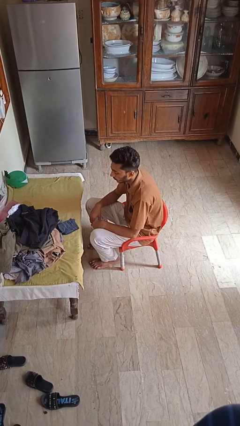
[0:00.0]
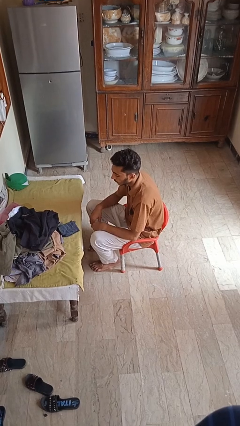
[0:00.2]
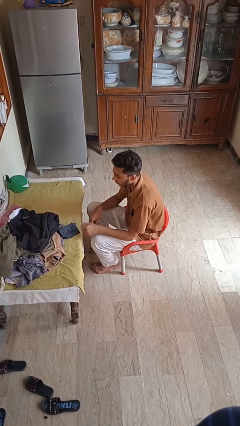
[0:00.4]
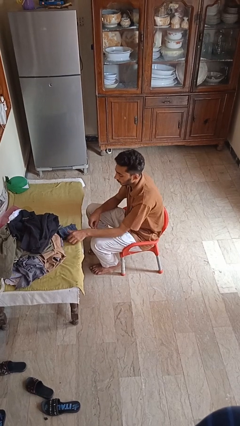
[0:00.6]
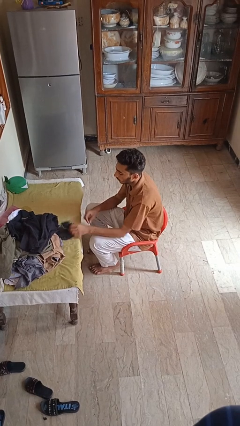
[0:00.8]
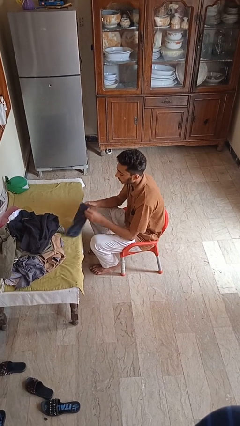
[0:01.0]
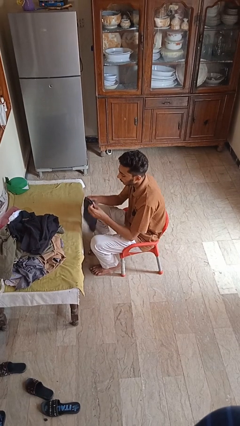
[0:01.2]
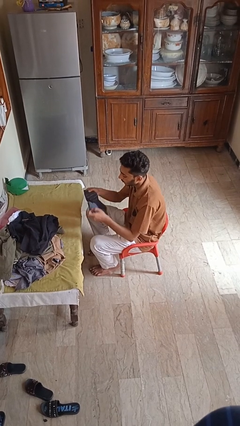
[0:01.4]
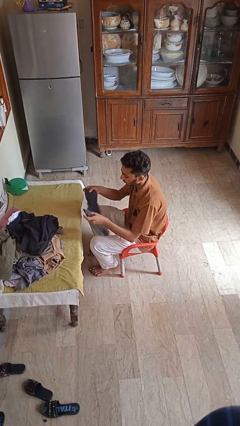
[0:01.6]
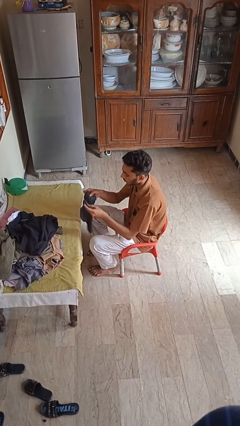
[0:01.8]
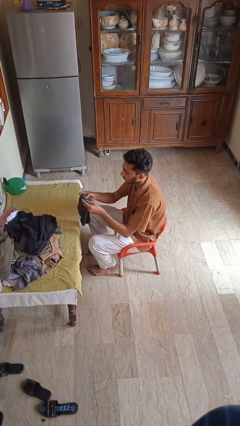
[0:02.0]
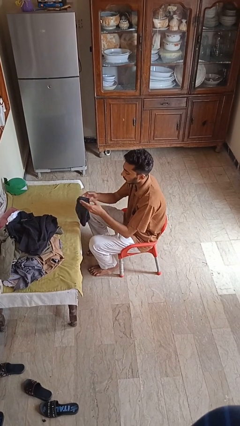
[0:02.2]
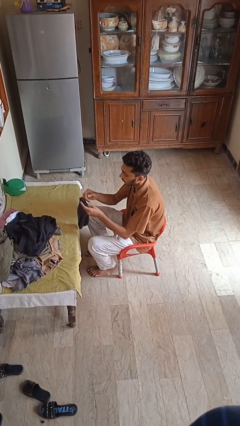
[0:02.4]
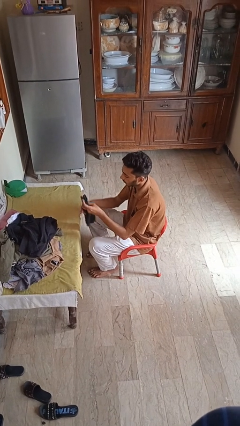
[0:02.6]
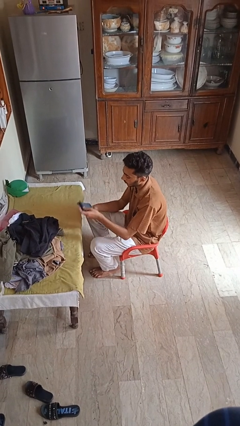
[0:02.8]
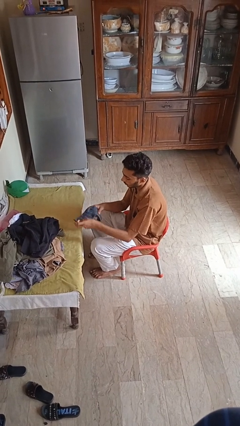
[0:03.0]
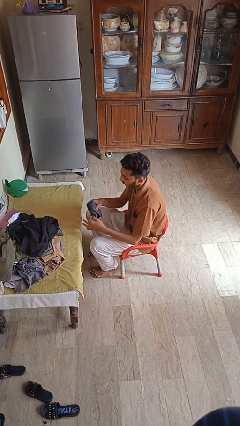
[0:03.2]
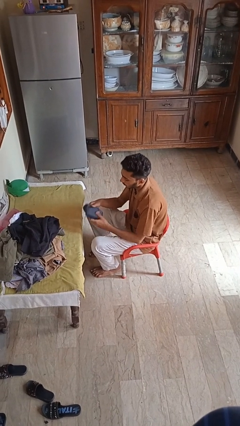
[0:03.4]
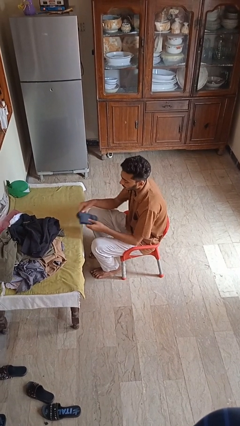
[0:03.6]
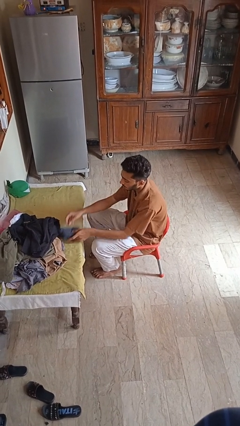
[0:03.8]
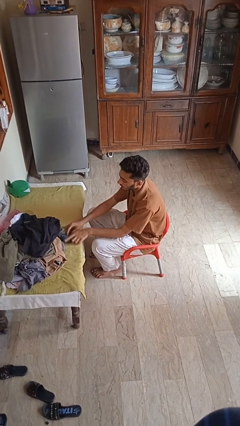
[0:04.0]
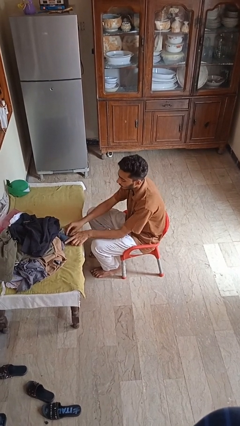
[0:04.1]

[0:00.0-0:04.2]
person folds socks

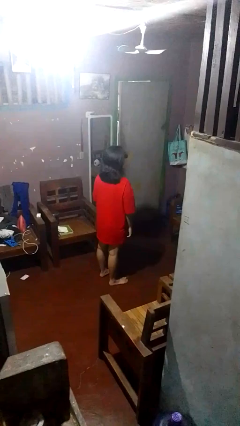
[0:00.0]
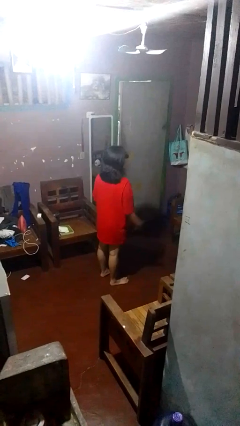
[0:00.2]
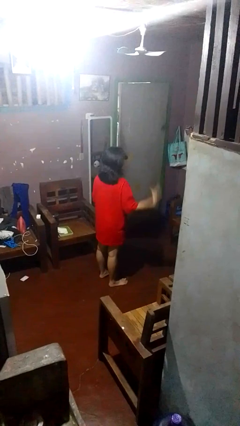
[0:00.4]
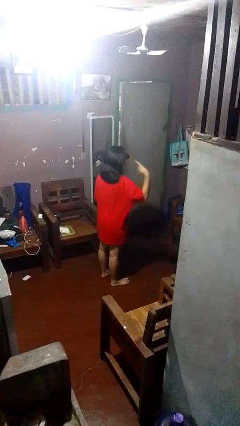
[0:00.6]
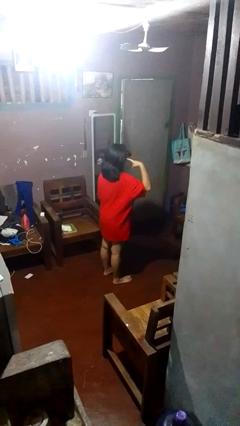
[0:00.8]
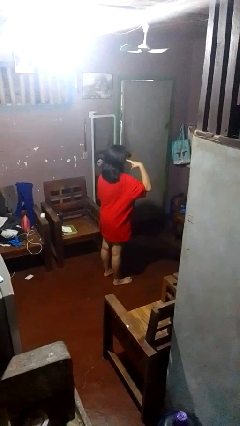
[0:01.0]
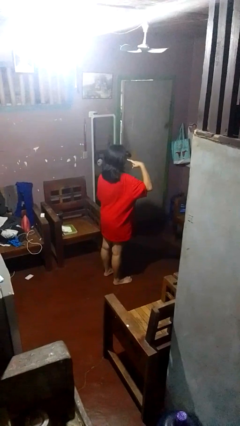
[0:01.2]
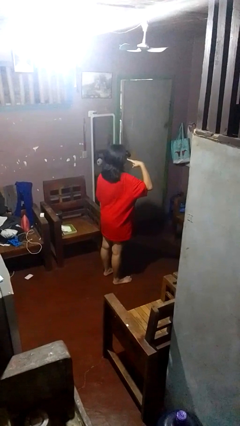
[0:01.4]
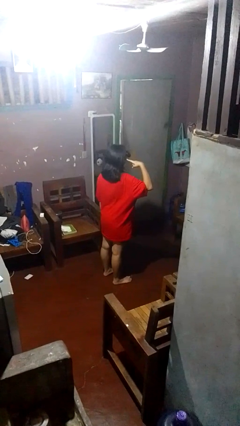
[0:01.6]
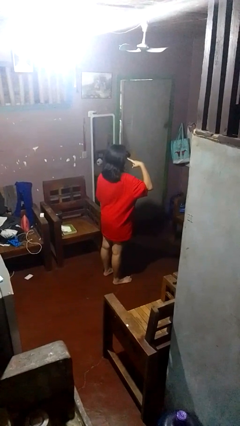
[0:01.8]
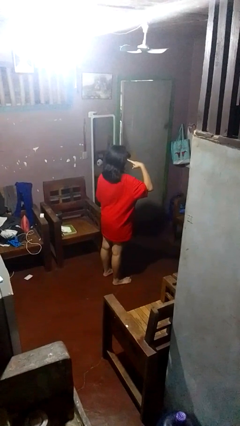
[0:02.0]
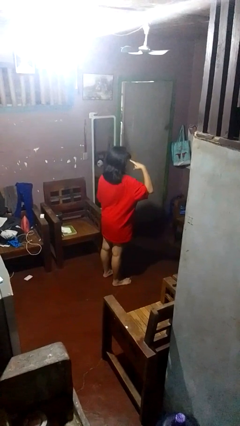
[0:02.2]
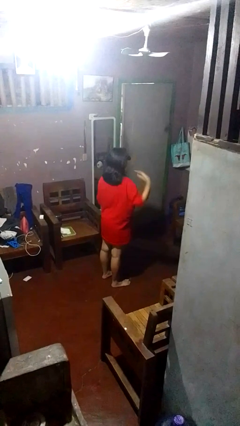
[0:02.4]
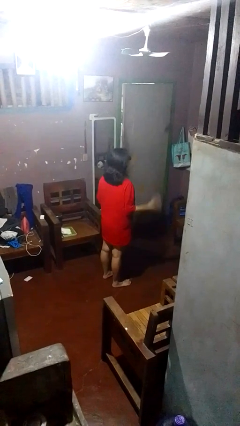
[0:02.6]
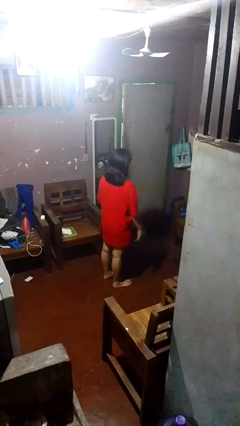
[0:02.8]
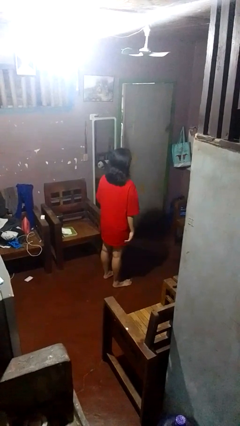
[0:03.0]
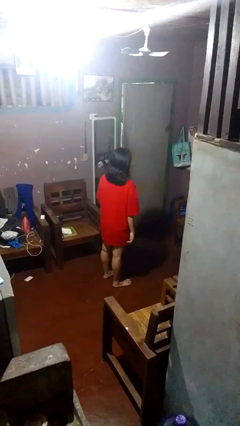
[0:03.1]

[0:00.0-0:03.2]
person gestures listen closely

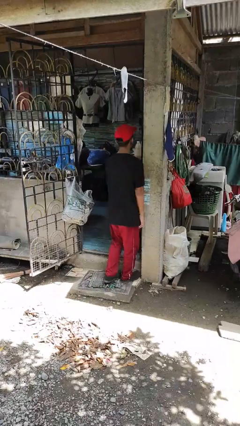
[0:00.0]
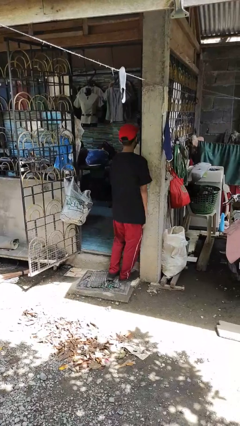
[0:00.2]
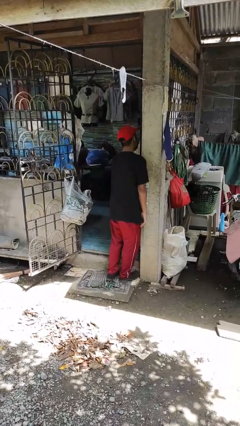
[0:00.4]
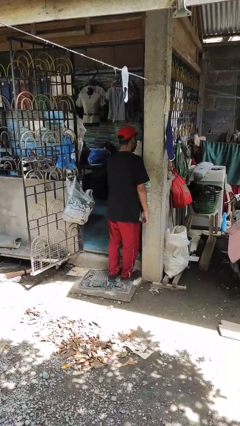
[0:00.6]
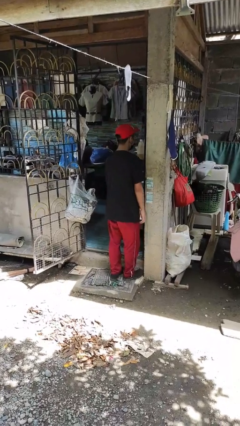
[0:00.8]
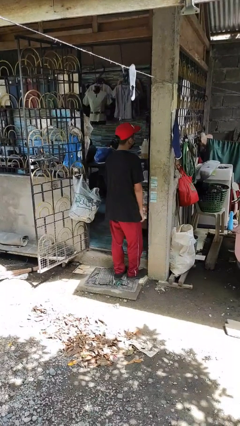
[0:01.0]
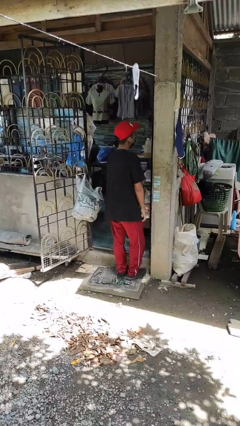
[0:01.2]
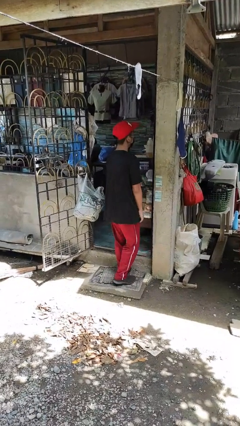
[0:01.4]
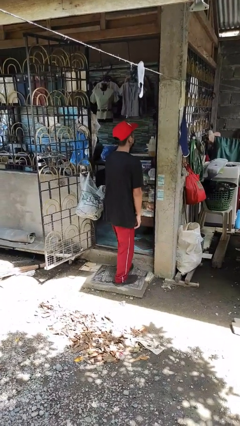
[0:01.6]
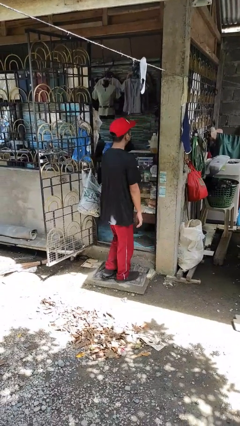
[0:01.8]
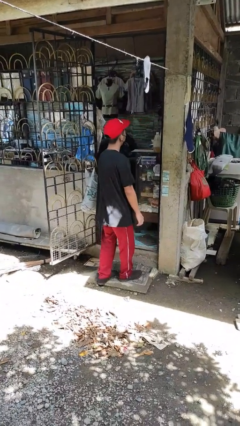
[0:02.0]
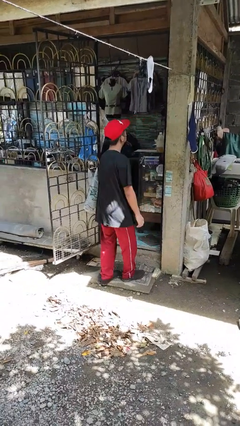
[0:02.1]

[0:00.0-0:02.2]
person bumps into wall

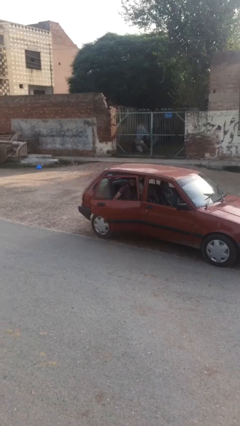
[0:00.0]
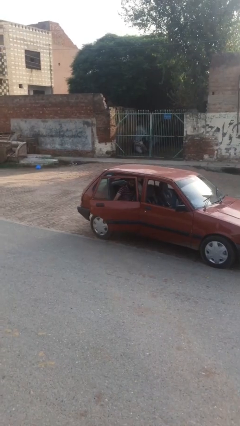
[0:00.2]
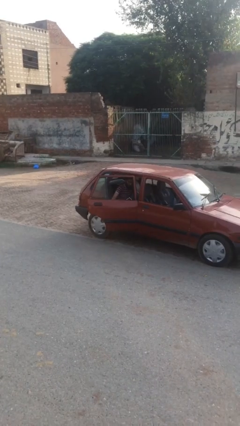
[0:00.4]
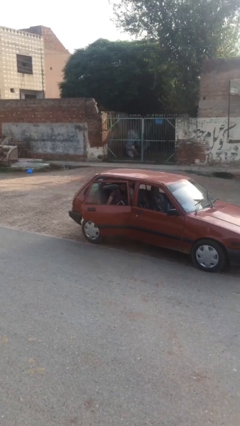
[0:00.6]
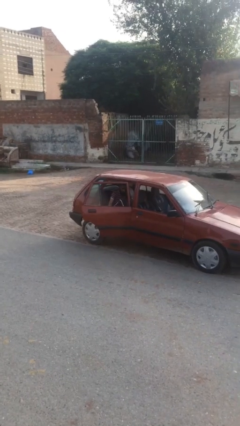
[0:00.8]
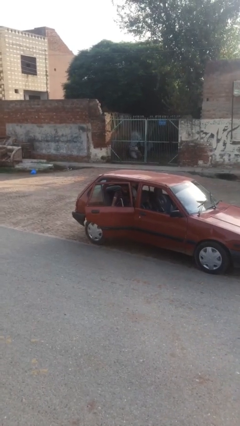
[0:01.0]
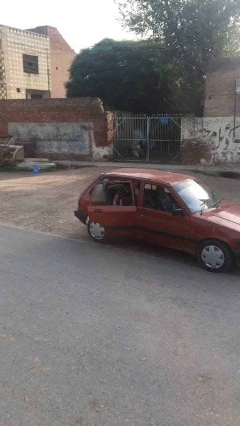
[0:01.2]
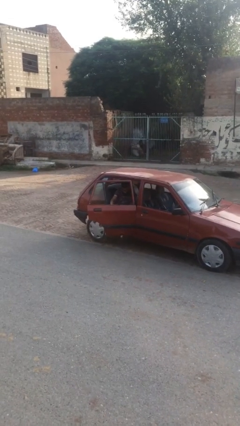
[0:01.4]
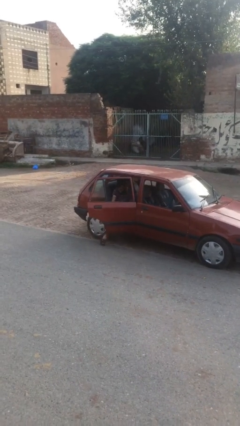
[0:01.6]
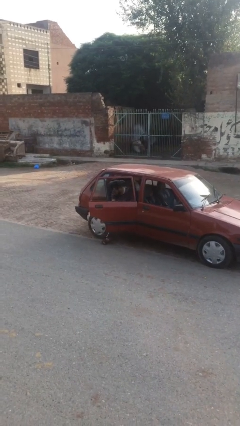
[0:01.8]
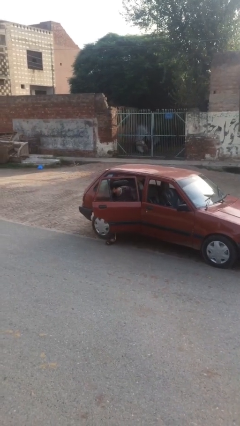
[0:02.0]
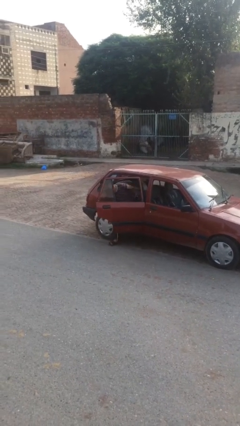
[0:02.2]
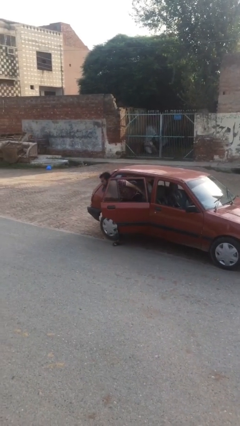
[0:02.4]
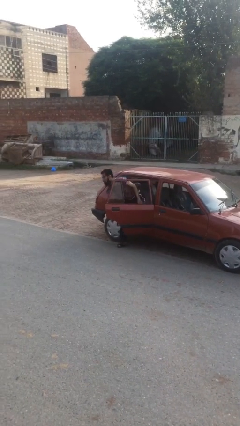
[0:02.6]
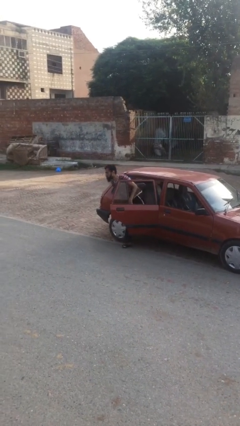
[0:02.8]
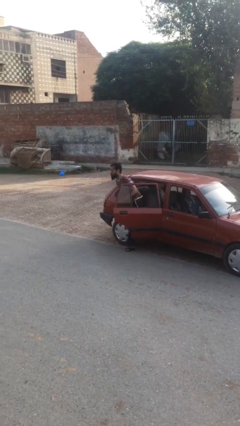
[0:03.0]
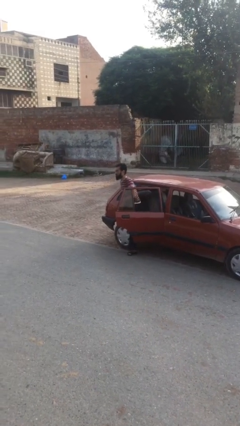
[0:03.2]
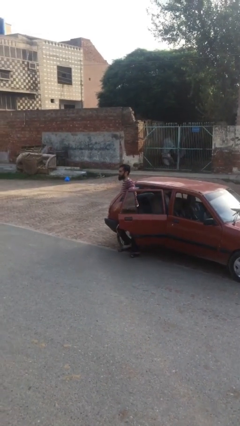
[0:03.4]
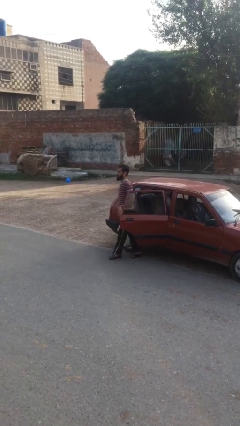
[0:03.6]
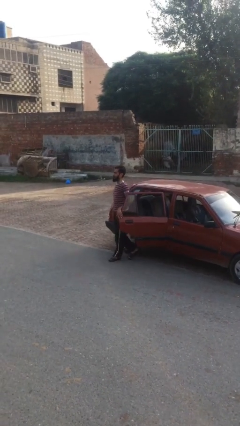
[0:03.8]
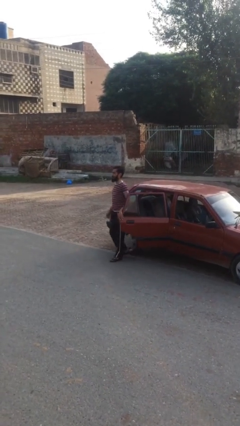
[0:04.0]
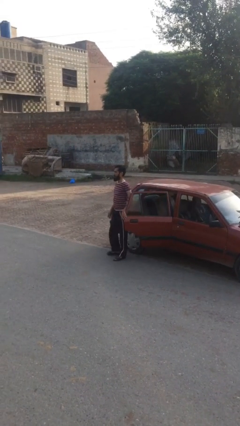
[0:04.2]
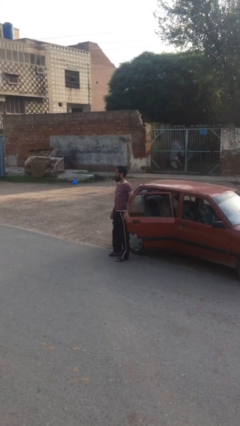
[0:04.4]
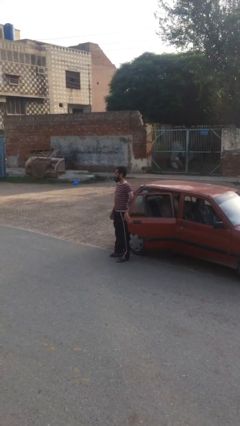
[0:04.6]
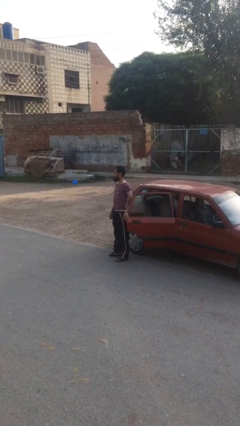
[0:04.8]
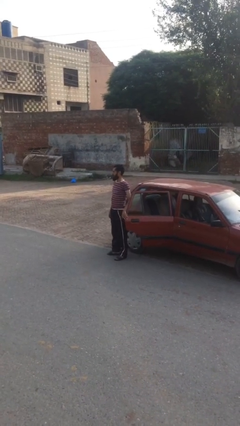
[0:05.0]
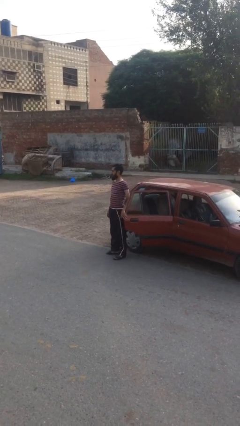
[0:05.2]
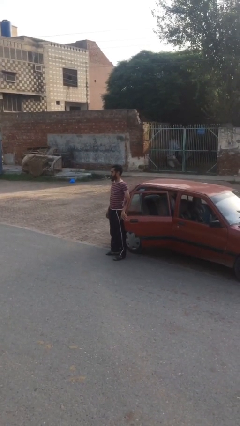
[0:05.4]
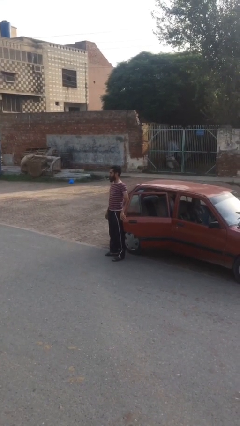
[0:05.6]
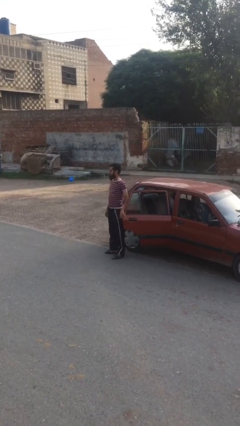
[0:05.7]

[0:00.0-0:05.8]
person exits car

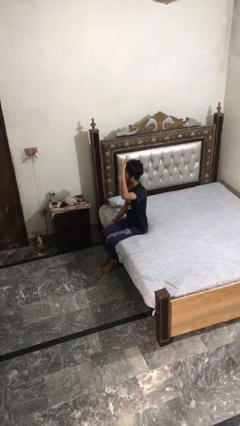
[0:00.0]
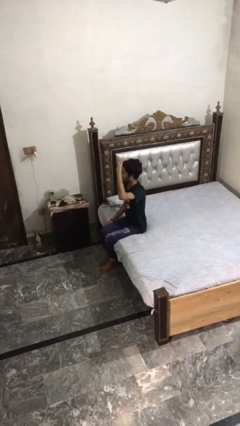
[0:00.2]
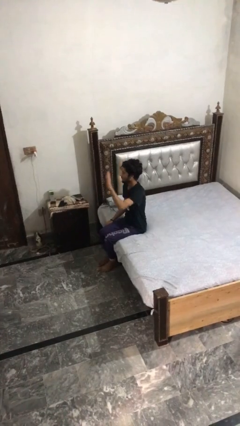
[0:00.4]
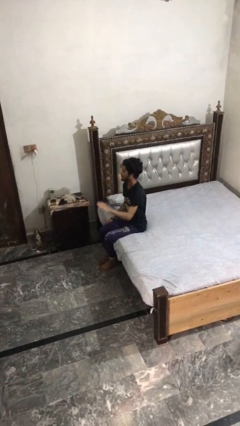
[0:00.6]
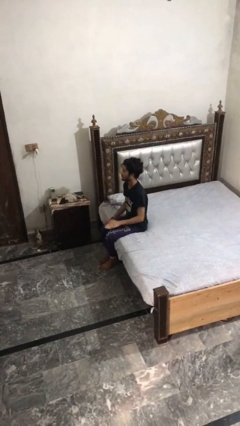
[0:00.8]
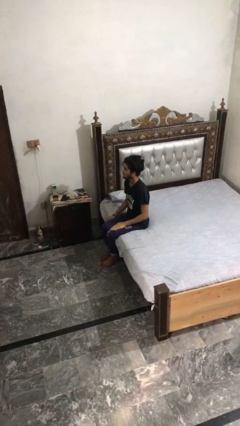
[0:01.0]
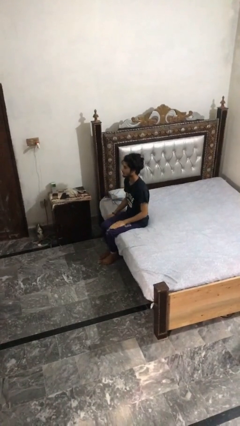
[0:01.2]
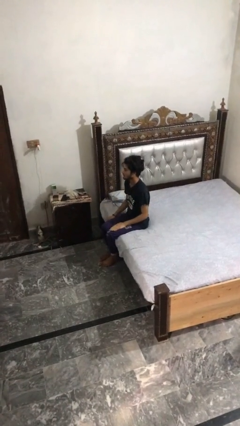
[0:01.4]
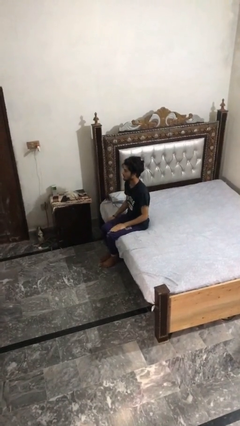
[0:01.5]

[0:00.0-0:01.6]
person gestures lower hand

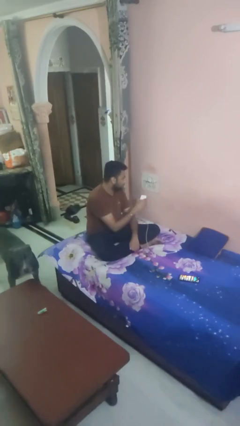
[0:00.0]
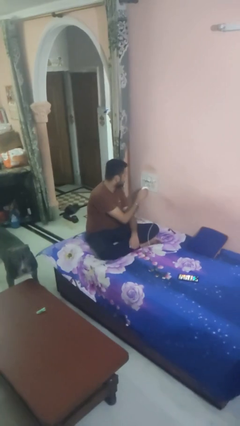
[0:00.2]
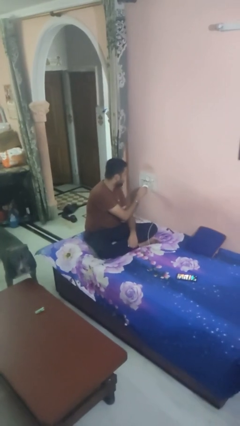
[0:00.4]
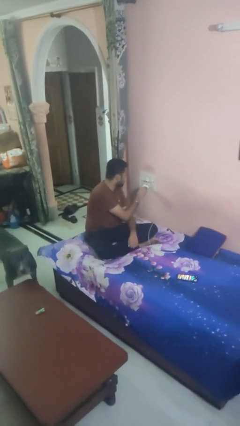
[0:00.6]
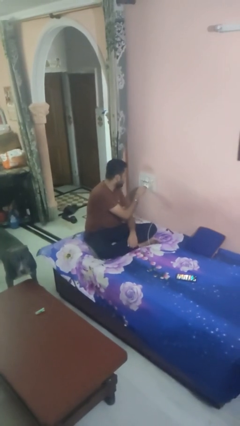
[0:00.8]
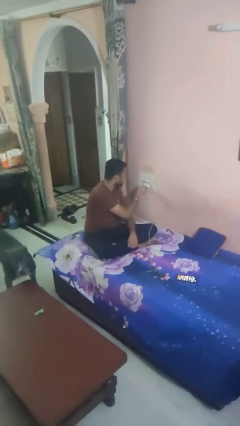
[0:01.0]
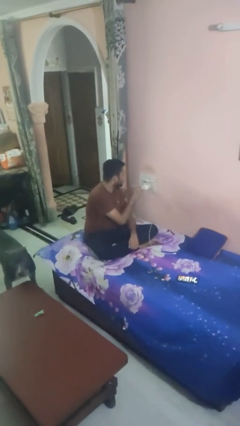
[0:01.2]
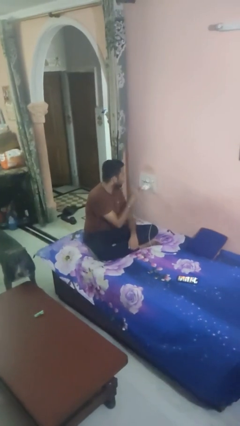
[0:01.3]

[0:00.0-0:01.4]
person plugs into electrical socket
